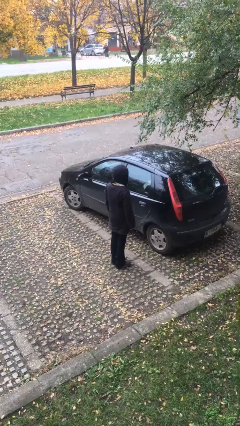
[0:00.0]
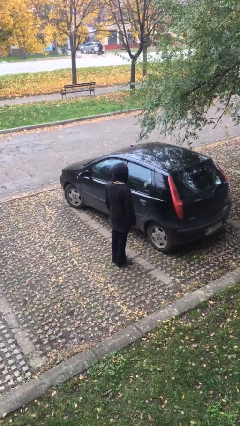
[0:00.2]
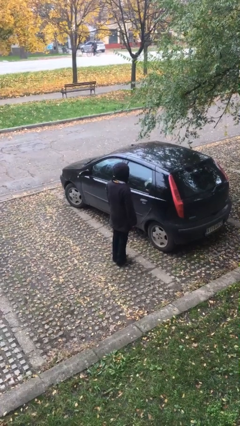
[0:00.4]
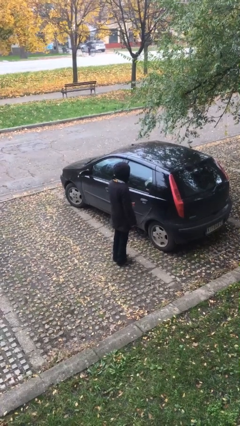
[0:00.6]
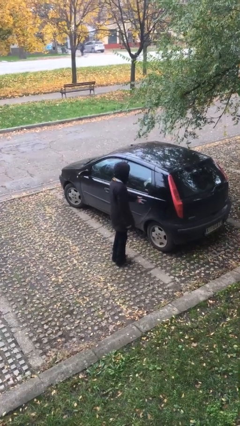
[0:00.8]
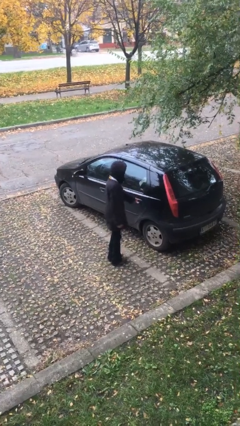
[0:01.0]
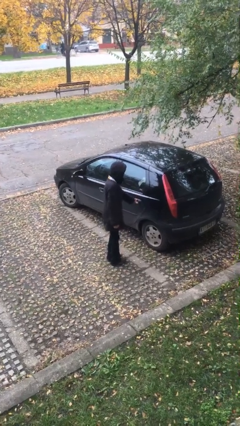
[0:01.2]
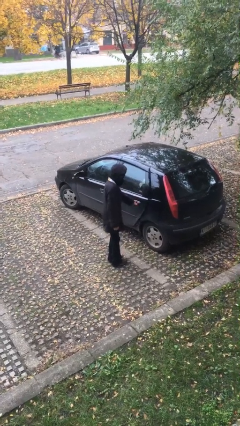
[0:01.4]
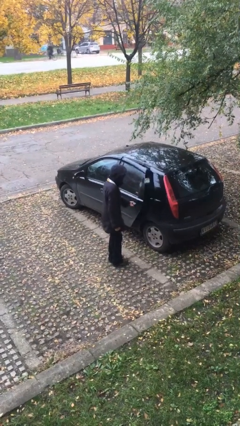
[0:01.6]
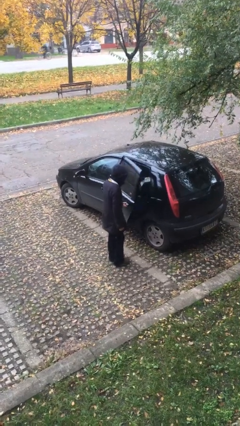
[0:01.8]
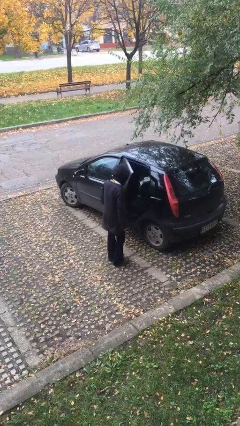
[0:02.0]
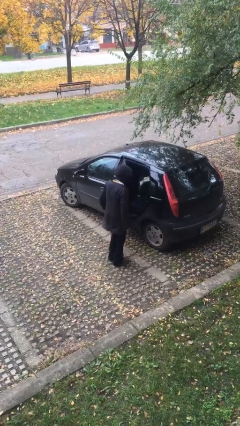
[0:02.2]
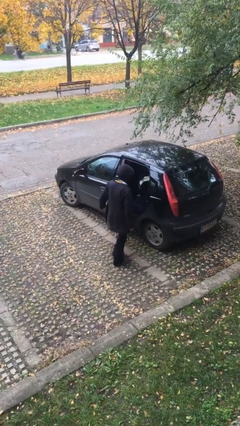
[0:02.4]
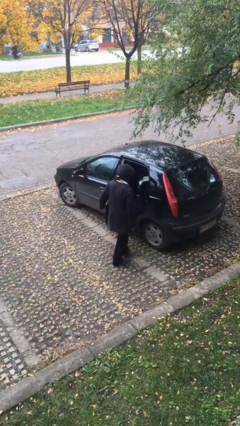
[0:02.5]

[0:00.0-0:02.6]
person opens car door

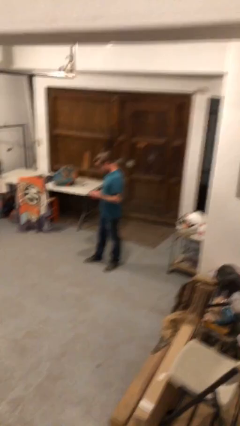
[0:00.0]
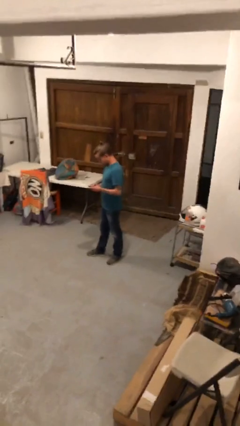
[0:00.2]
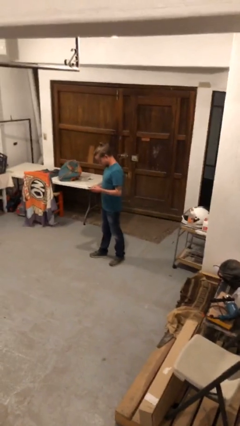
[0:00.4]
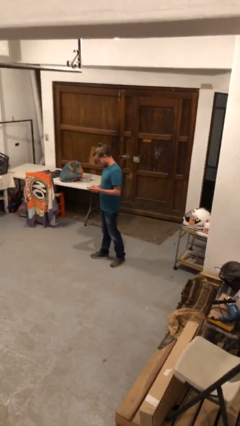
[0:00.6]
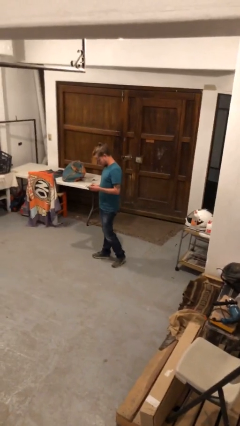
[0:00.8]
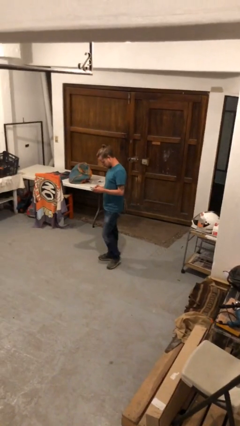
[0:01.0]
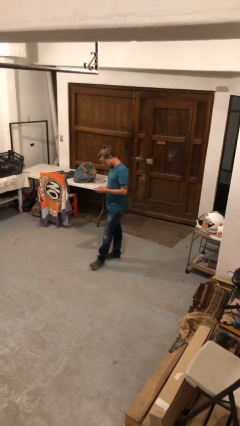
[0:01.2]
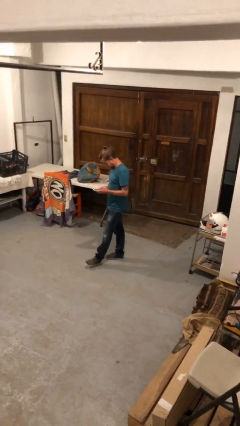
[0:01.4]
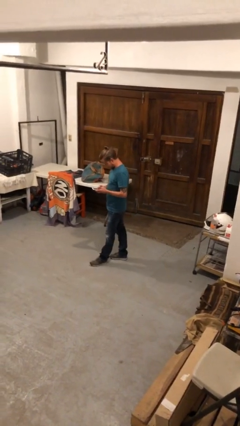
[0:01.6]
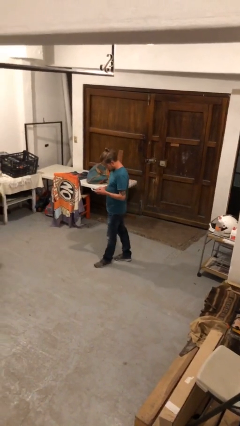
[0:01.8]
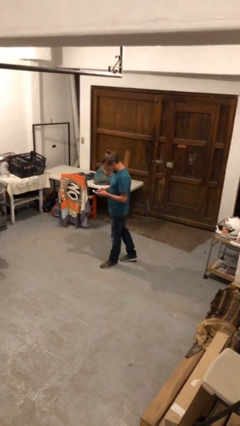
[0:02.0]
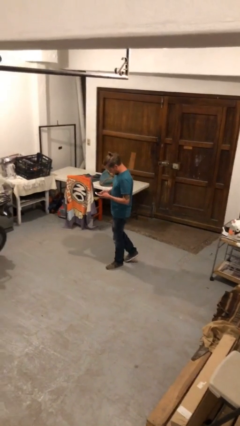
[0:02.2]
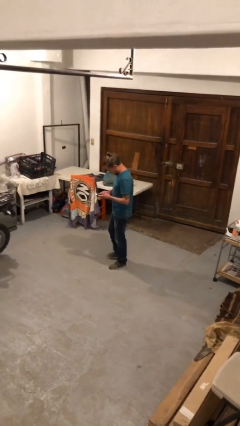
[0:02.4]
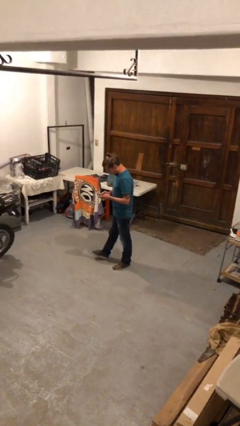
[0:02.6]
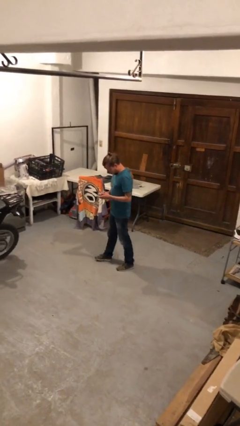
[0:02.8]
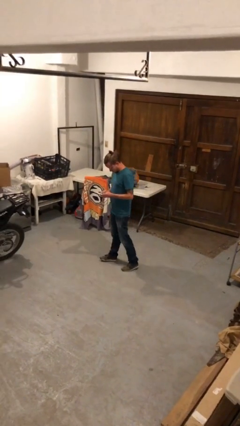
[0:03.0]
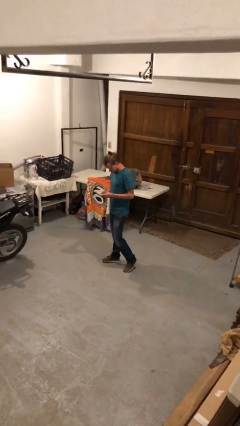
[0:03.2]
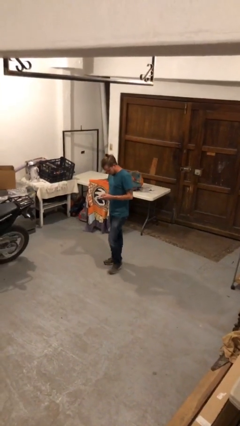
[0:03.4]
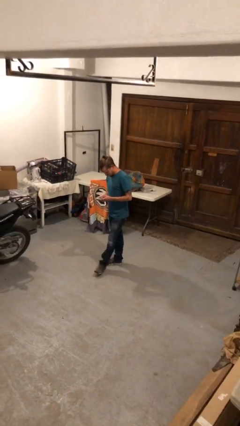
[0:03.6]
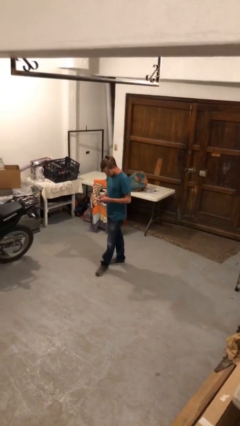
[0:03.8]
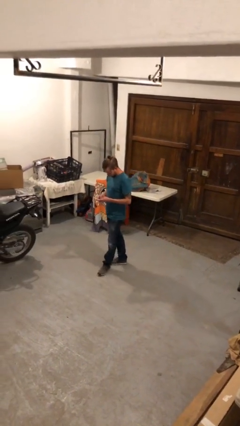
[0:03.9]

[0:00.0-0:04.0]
person texts on phone

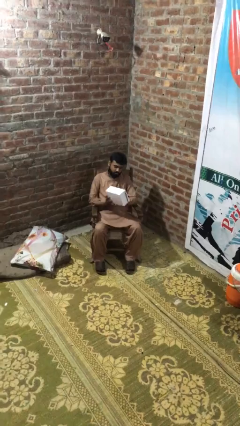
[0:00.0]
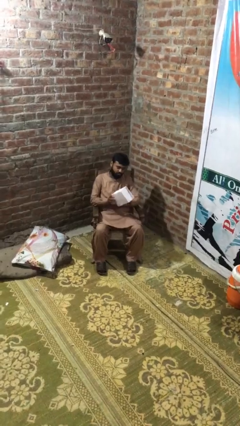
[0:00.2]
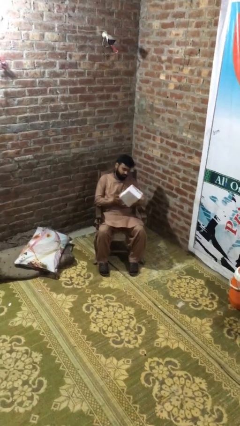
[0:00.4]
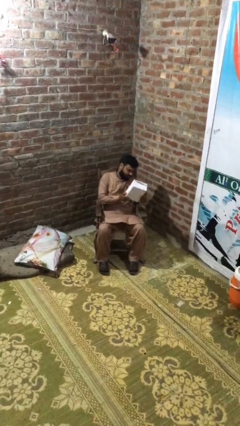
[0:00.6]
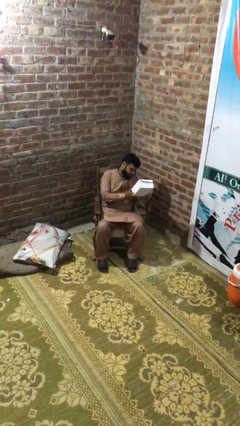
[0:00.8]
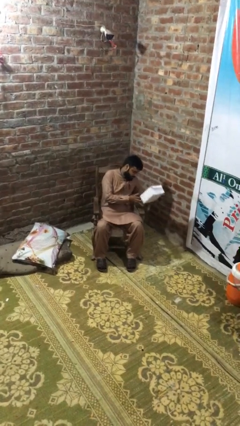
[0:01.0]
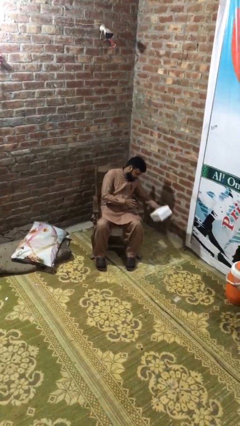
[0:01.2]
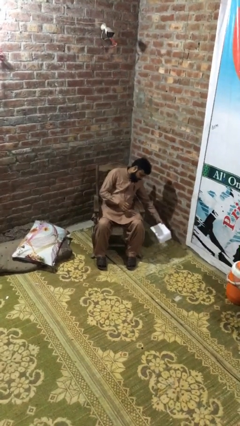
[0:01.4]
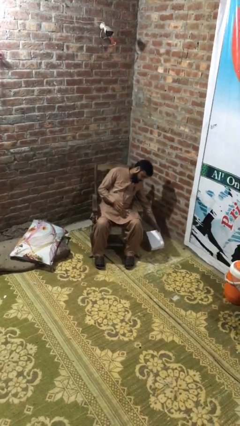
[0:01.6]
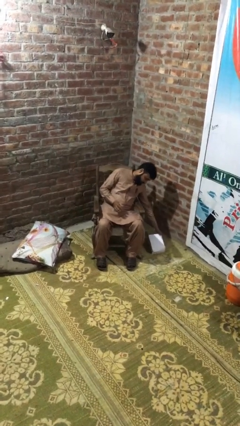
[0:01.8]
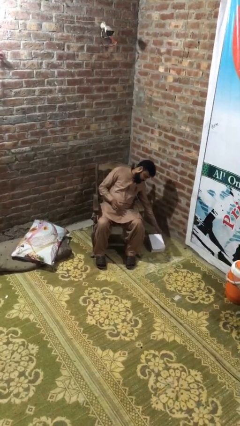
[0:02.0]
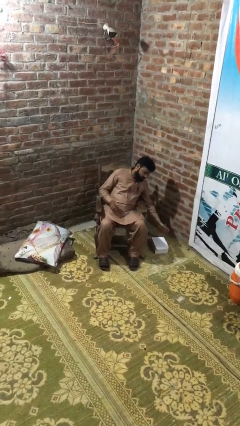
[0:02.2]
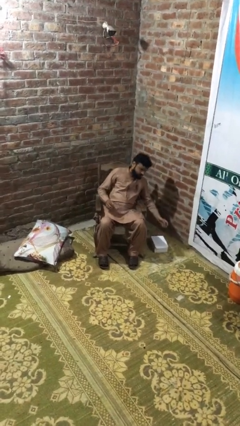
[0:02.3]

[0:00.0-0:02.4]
person puts down object on floor

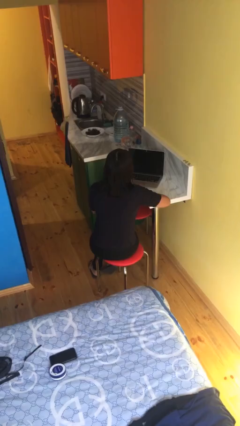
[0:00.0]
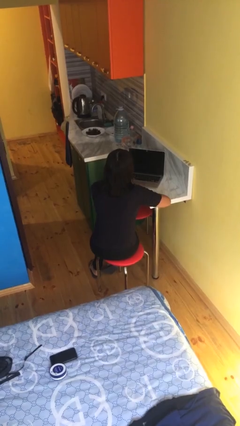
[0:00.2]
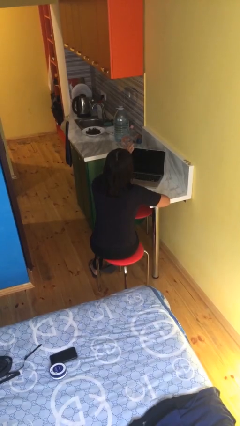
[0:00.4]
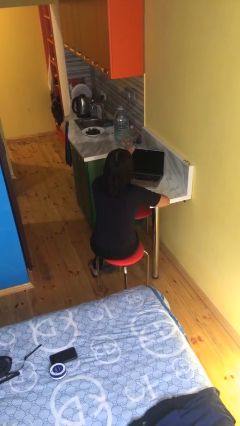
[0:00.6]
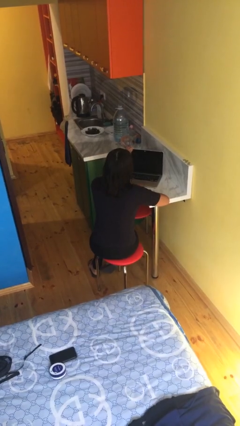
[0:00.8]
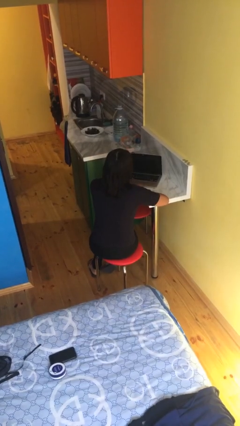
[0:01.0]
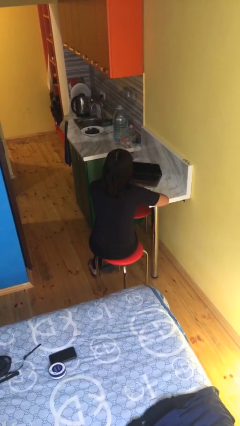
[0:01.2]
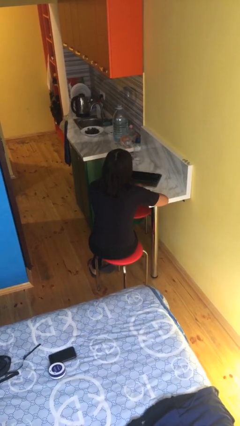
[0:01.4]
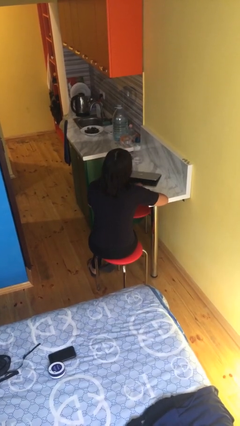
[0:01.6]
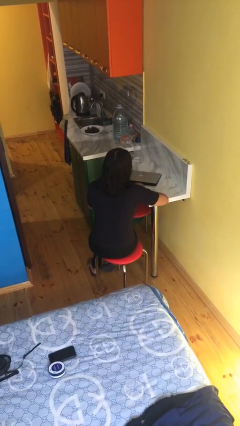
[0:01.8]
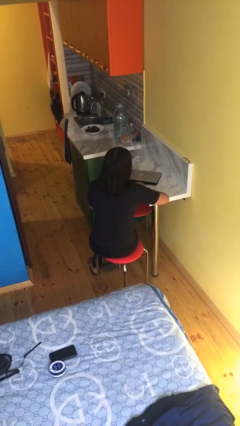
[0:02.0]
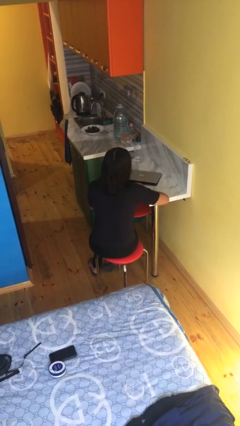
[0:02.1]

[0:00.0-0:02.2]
person closes laptop

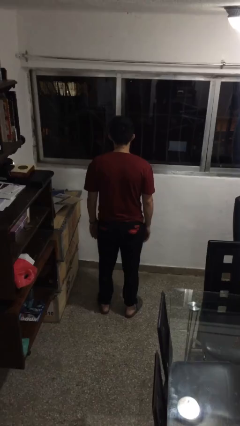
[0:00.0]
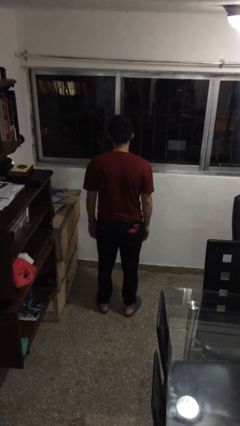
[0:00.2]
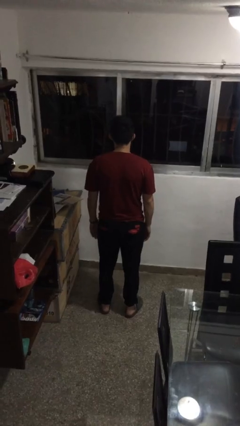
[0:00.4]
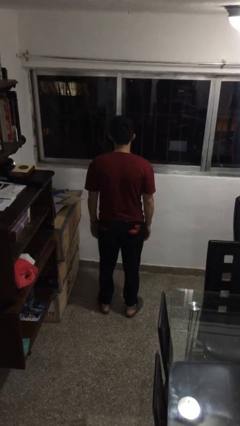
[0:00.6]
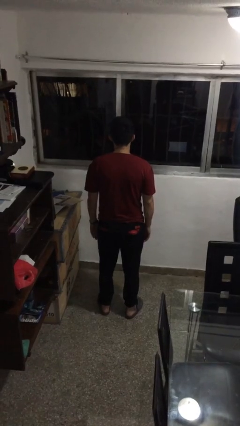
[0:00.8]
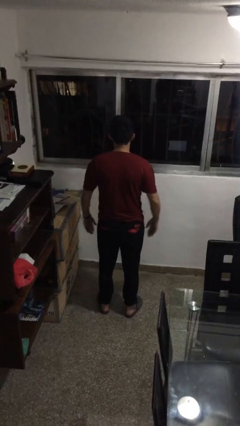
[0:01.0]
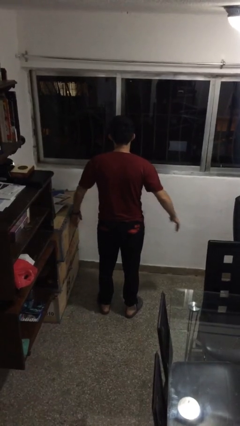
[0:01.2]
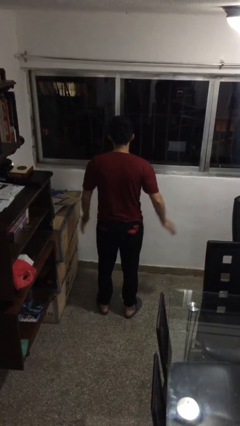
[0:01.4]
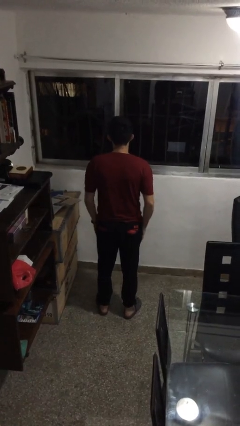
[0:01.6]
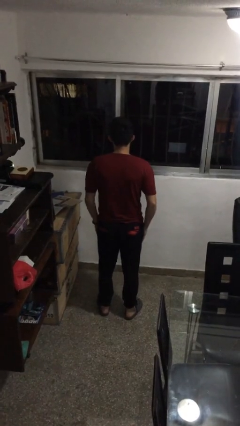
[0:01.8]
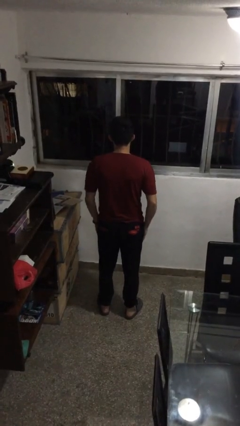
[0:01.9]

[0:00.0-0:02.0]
person slaps hands on thighs

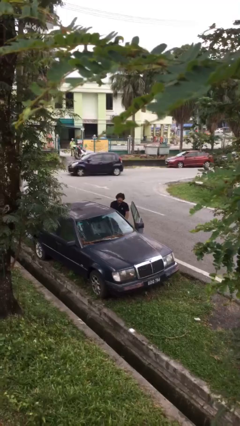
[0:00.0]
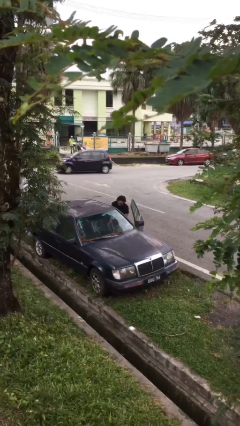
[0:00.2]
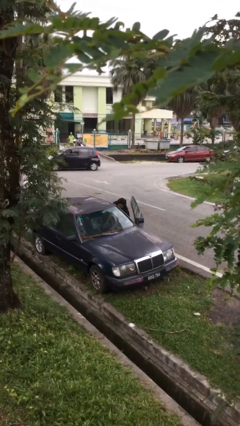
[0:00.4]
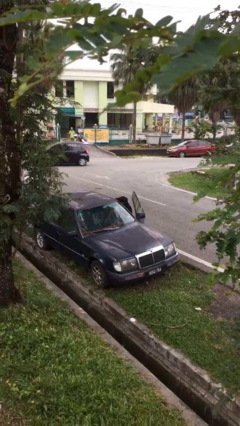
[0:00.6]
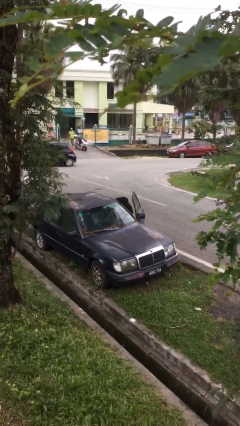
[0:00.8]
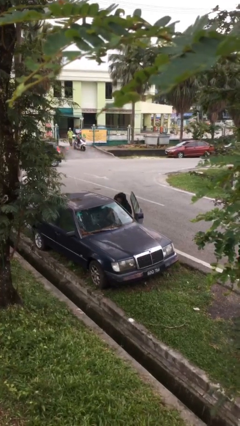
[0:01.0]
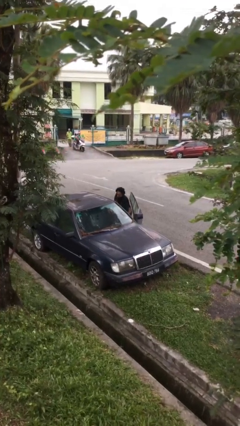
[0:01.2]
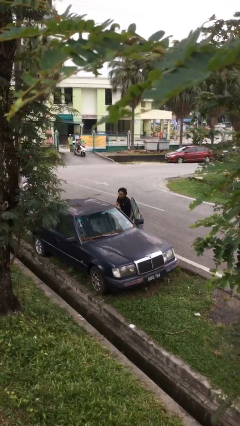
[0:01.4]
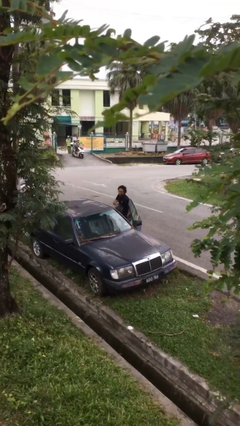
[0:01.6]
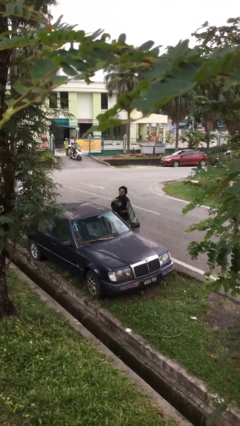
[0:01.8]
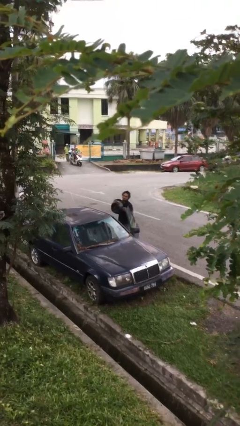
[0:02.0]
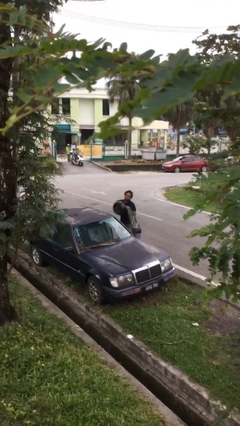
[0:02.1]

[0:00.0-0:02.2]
person unloads car

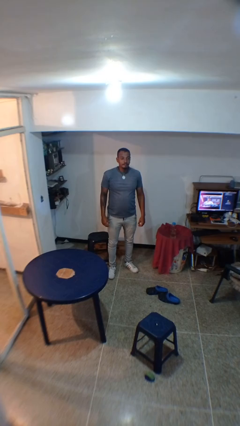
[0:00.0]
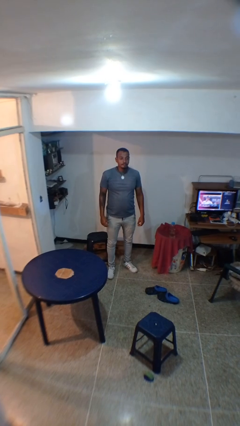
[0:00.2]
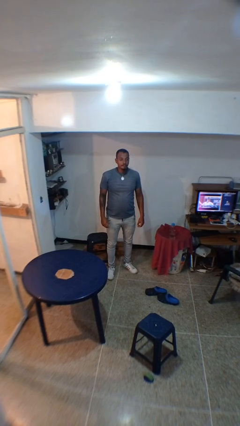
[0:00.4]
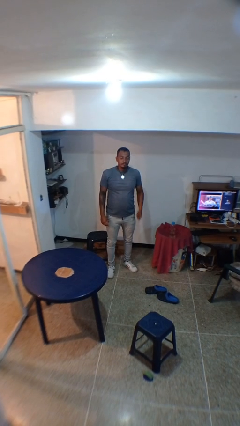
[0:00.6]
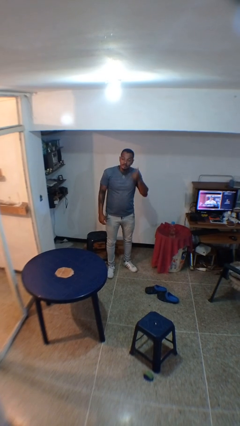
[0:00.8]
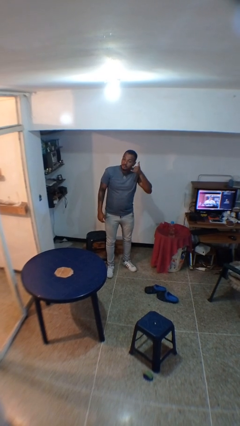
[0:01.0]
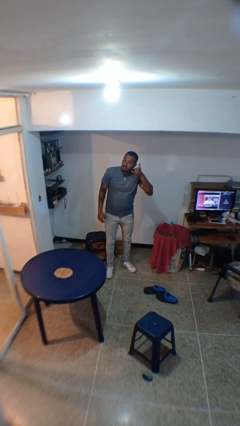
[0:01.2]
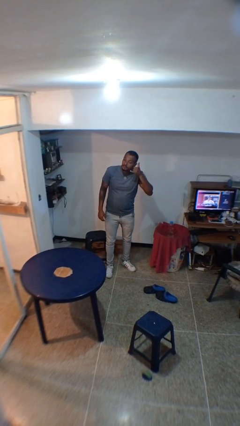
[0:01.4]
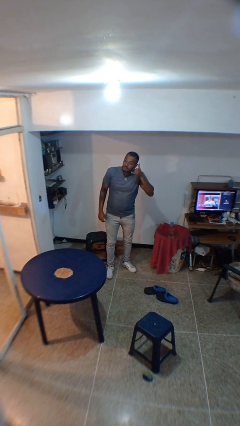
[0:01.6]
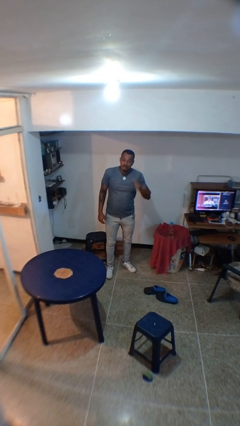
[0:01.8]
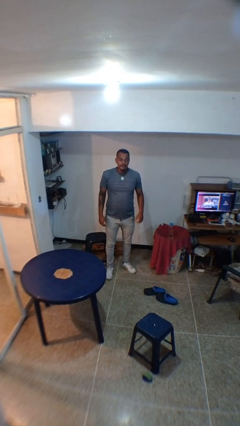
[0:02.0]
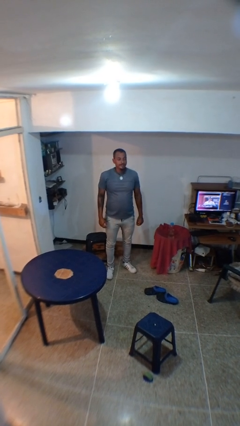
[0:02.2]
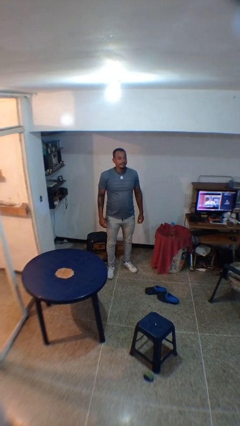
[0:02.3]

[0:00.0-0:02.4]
person gestures call me
